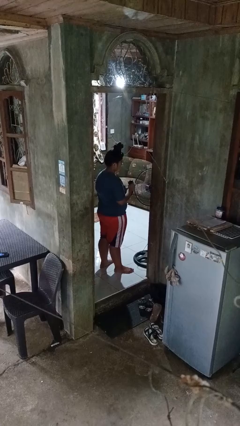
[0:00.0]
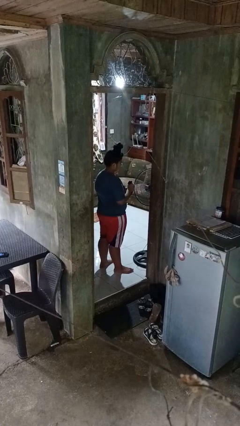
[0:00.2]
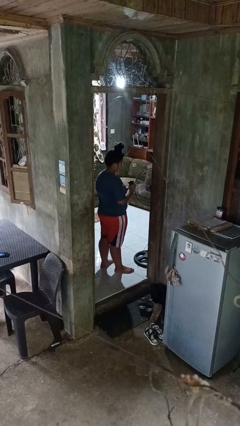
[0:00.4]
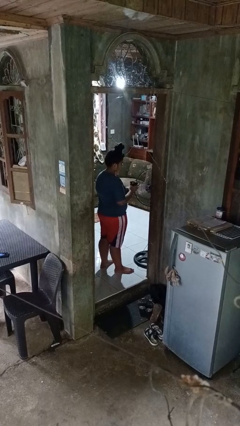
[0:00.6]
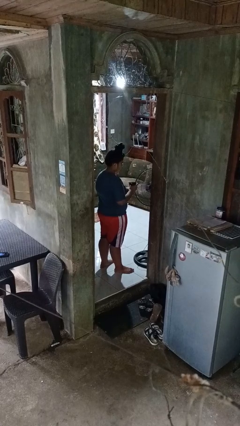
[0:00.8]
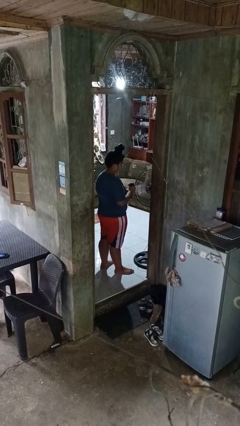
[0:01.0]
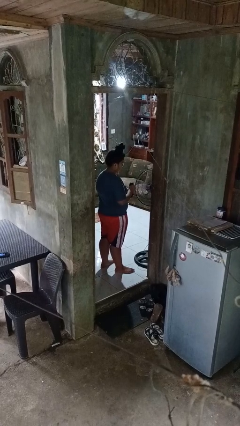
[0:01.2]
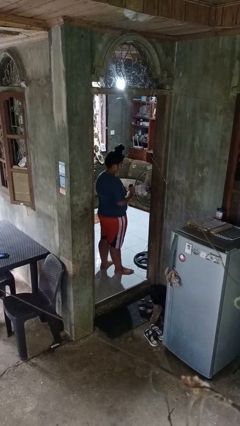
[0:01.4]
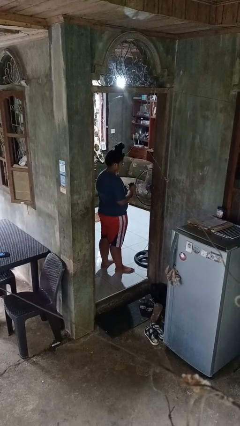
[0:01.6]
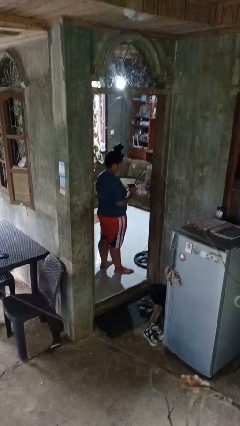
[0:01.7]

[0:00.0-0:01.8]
person squeezes object

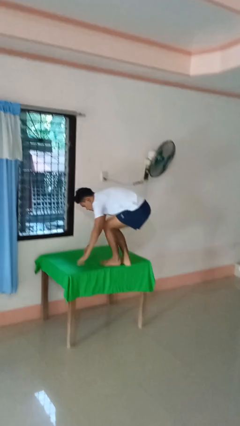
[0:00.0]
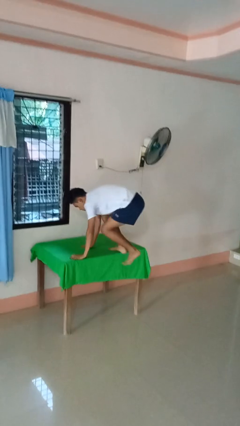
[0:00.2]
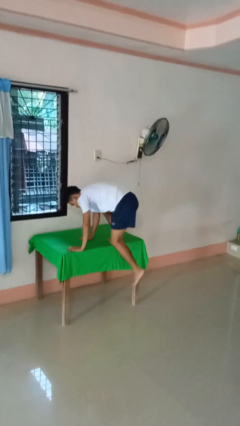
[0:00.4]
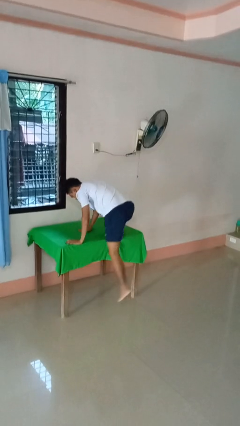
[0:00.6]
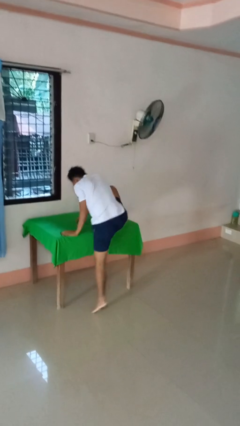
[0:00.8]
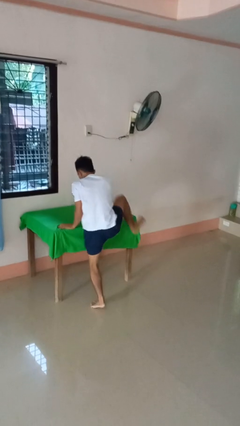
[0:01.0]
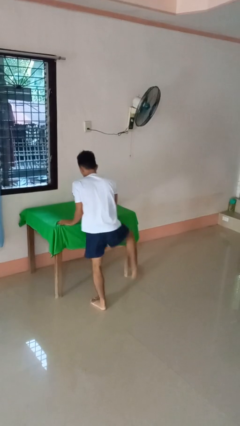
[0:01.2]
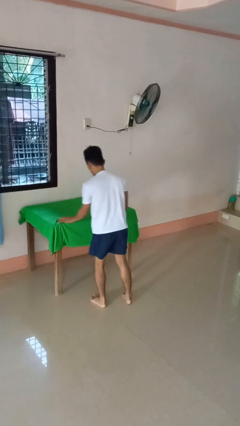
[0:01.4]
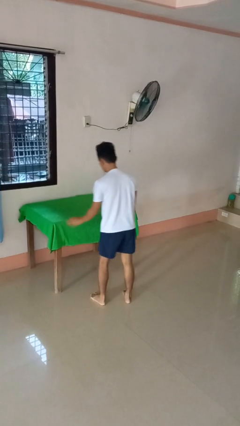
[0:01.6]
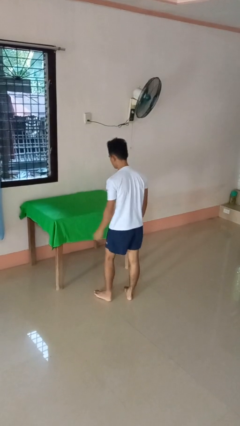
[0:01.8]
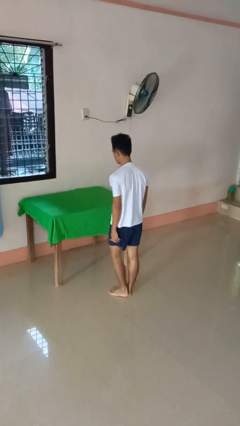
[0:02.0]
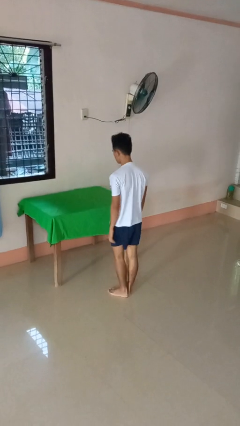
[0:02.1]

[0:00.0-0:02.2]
person climbs off table

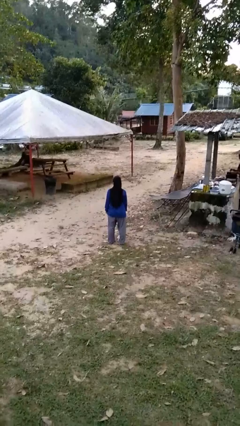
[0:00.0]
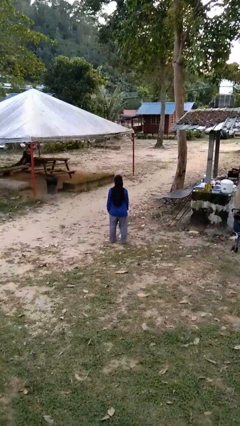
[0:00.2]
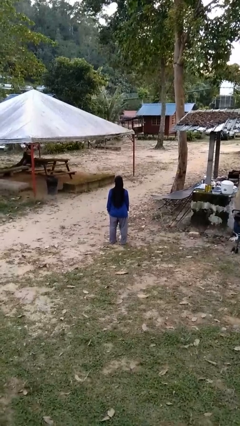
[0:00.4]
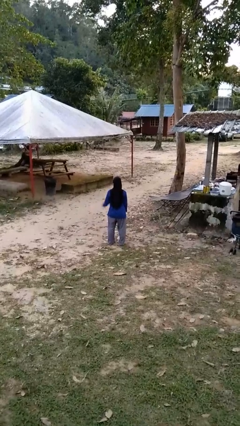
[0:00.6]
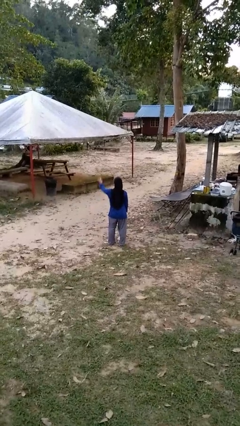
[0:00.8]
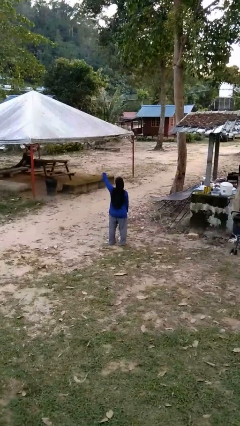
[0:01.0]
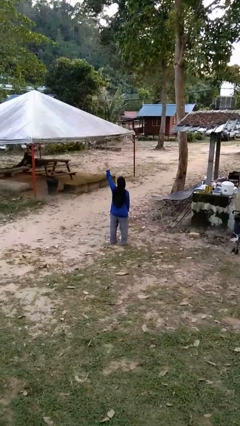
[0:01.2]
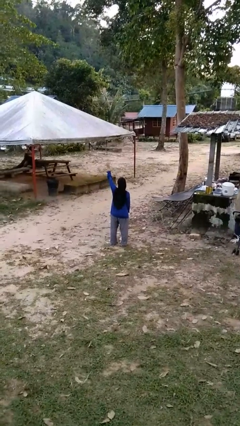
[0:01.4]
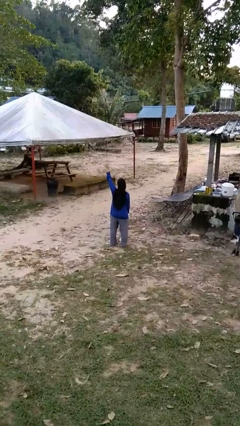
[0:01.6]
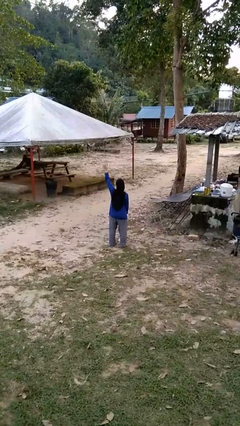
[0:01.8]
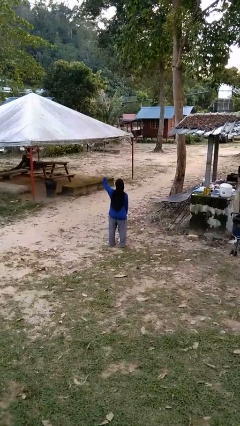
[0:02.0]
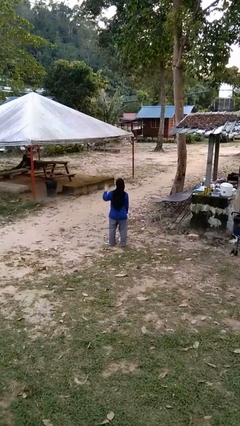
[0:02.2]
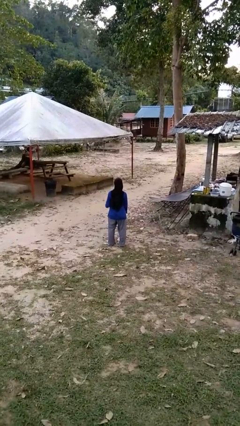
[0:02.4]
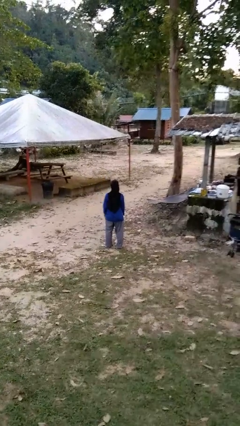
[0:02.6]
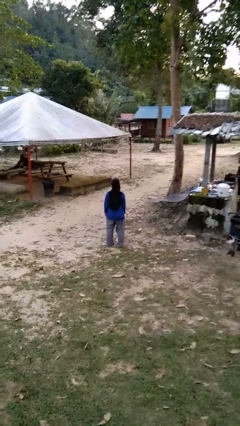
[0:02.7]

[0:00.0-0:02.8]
person gestures number four

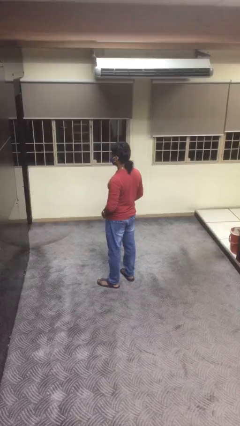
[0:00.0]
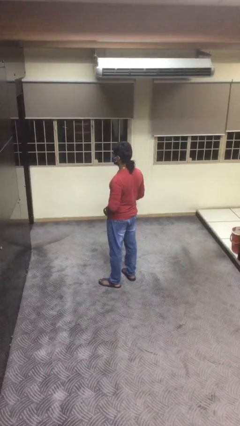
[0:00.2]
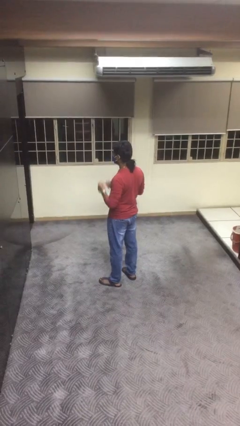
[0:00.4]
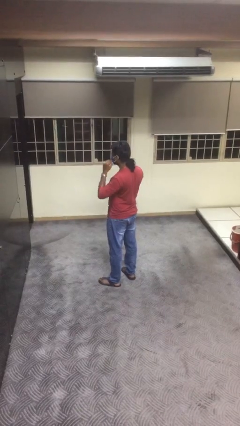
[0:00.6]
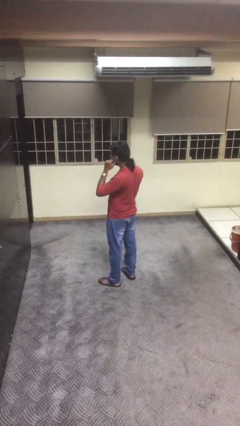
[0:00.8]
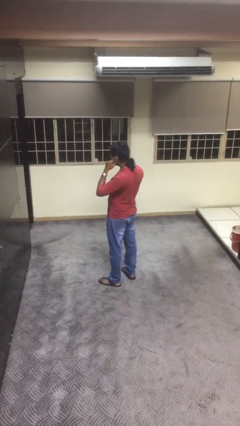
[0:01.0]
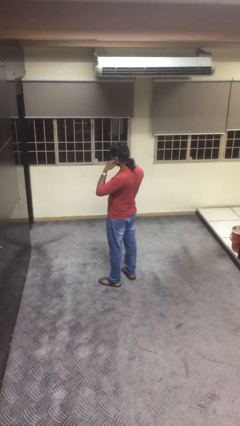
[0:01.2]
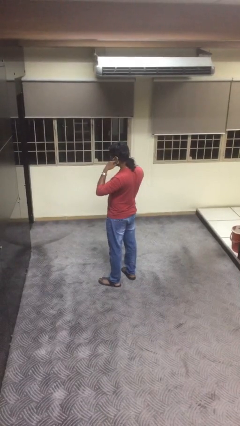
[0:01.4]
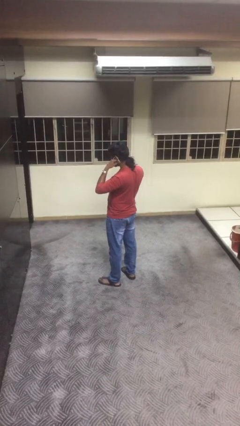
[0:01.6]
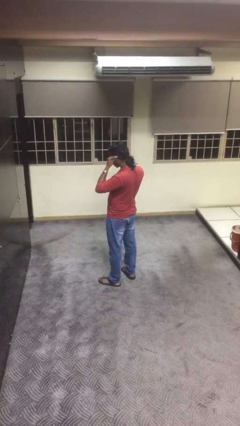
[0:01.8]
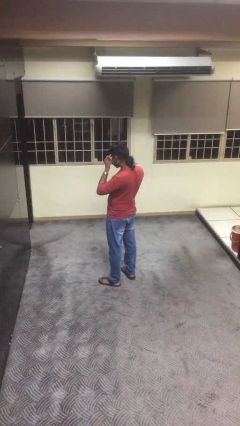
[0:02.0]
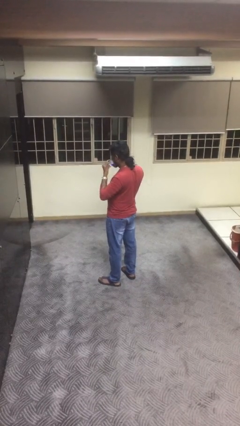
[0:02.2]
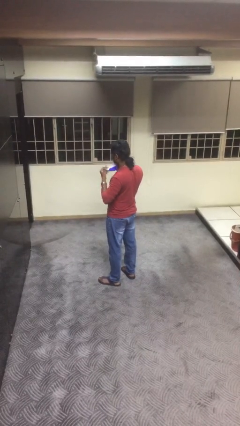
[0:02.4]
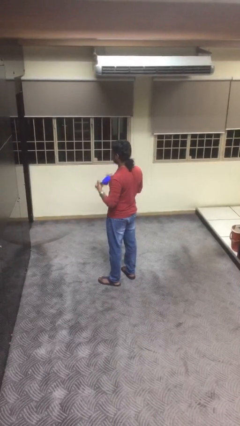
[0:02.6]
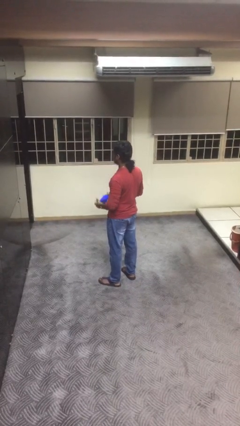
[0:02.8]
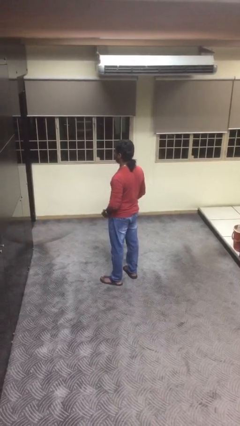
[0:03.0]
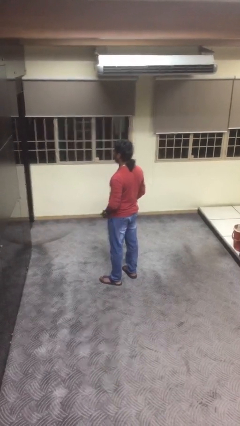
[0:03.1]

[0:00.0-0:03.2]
person takes off facemask

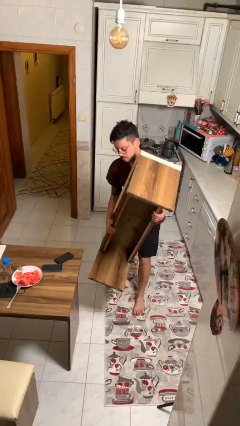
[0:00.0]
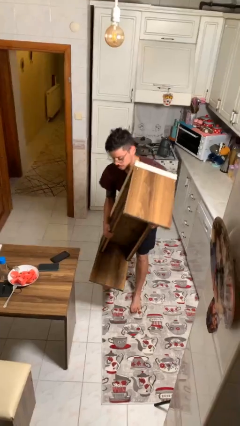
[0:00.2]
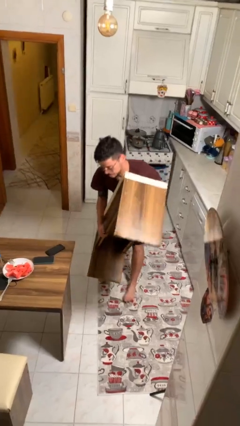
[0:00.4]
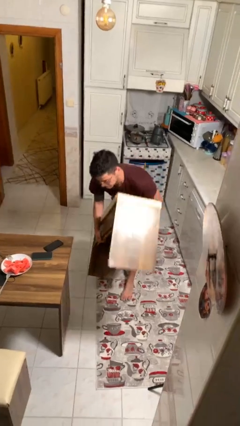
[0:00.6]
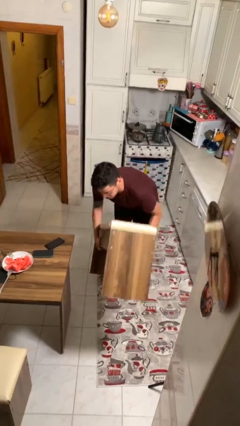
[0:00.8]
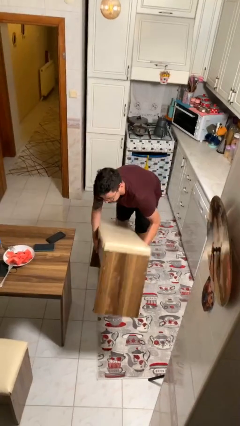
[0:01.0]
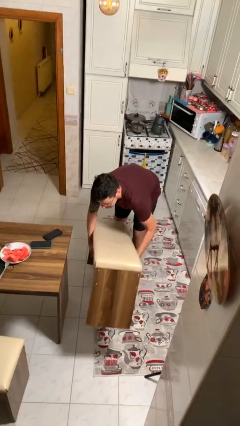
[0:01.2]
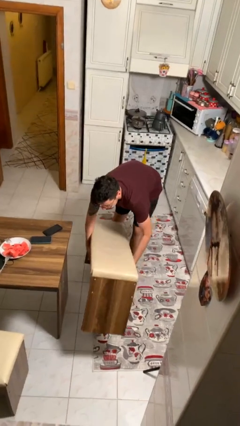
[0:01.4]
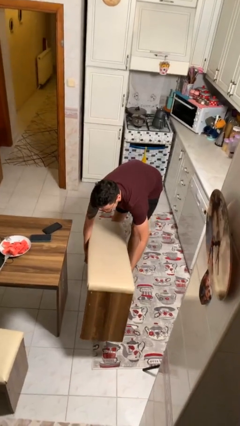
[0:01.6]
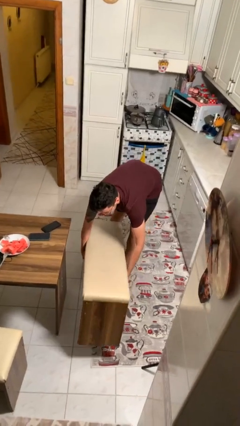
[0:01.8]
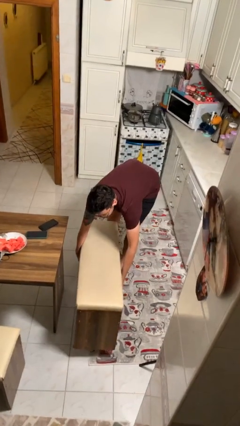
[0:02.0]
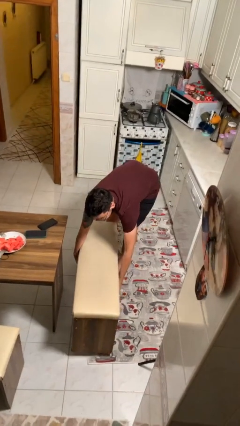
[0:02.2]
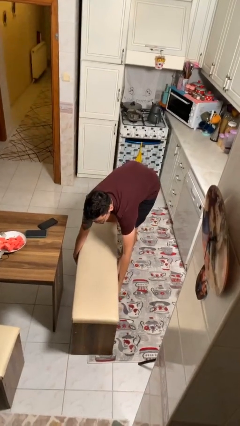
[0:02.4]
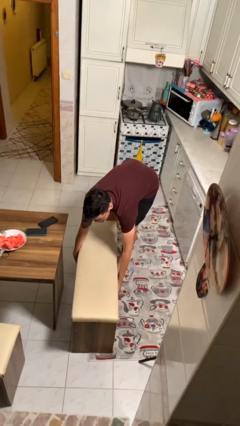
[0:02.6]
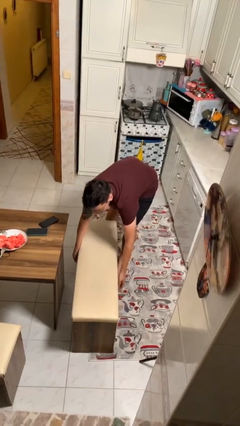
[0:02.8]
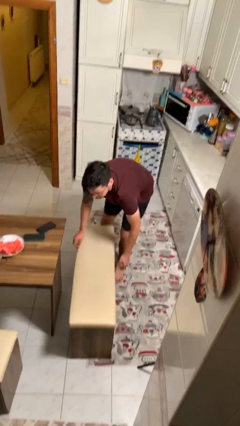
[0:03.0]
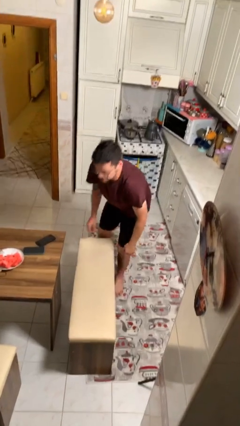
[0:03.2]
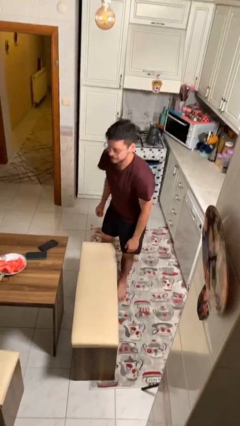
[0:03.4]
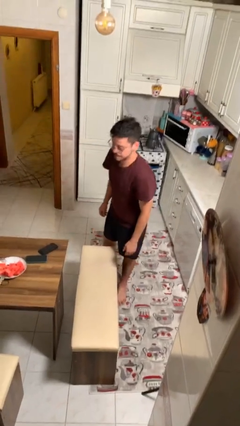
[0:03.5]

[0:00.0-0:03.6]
person puts down object on floor

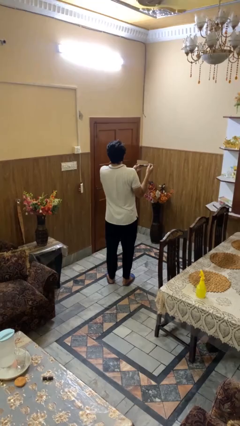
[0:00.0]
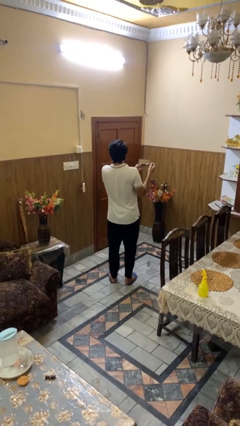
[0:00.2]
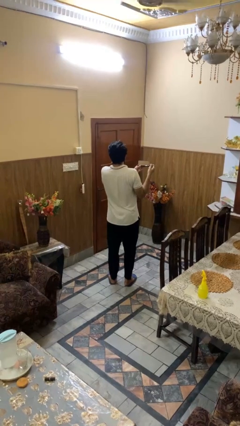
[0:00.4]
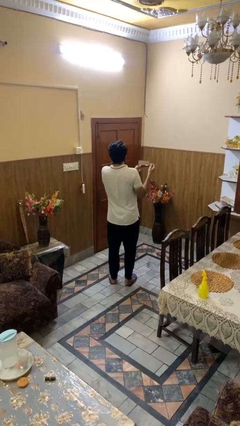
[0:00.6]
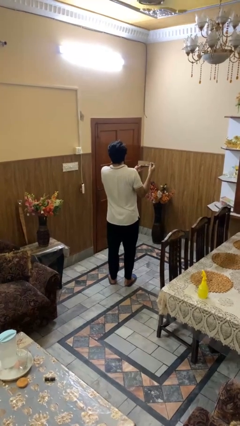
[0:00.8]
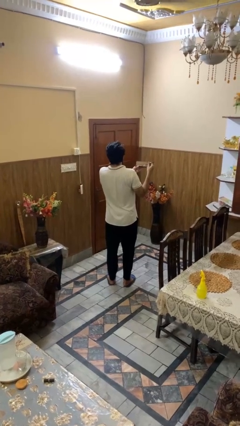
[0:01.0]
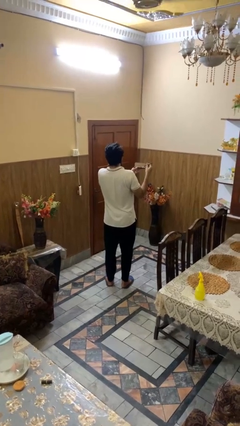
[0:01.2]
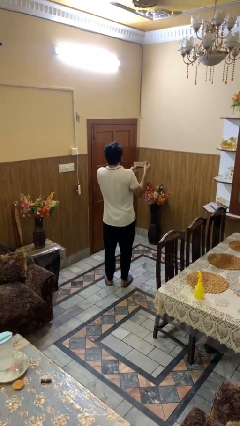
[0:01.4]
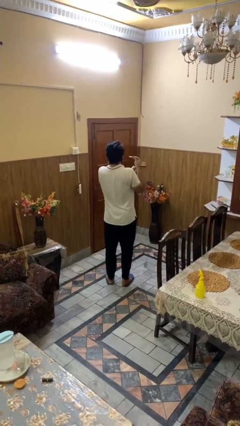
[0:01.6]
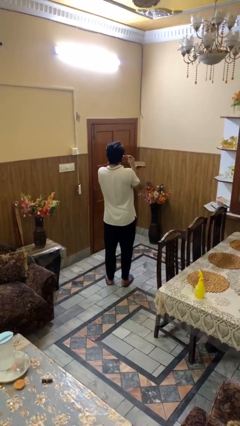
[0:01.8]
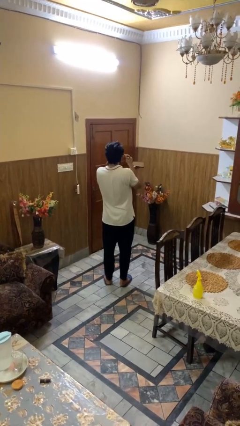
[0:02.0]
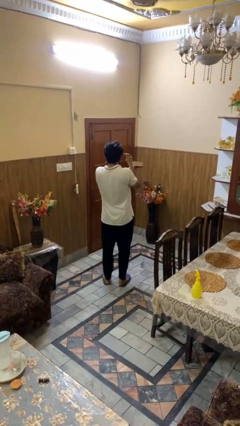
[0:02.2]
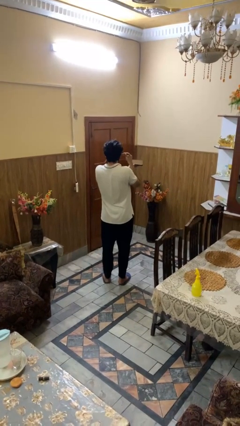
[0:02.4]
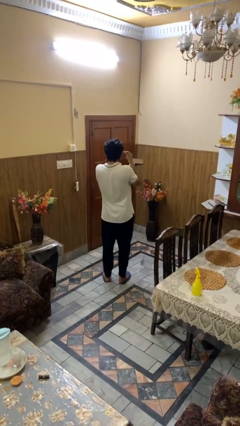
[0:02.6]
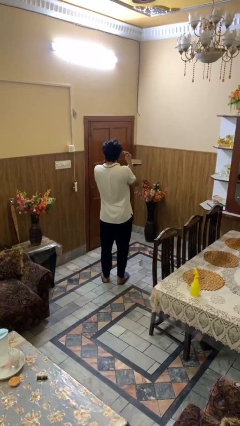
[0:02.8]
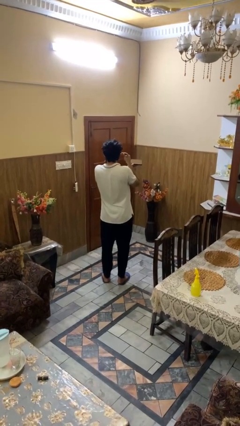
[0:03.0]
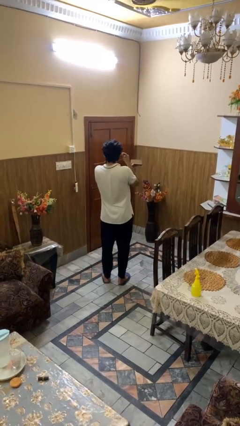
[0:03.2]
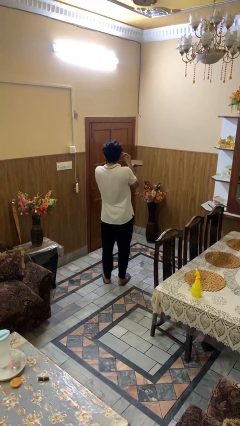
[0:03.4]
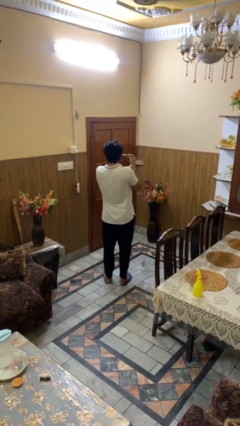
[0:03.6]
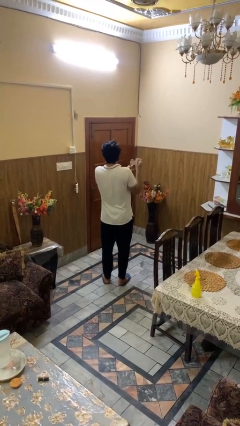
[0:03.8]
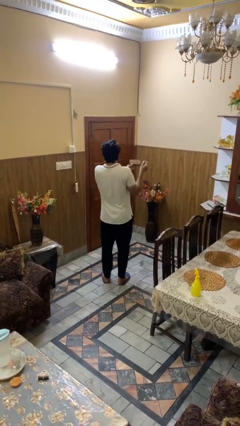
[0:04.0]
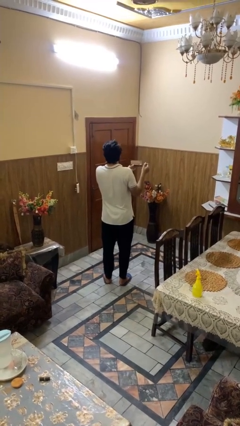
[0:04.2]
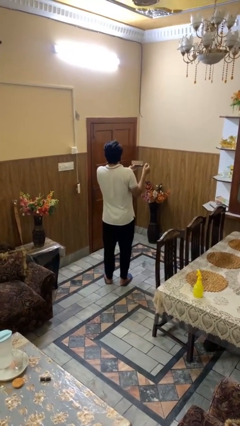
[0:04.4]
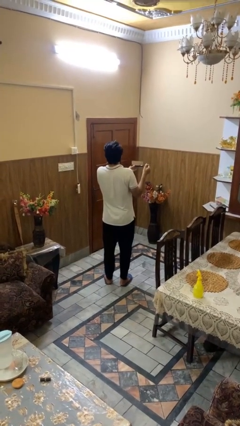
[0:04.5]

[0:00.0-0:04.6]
person applies eye makeup
